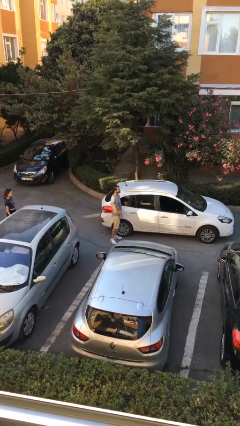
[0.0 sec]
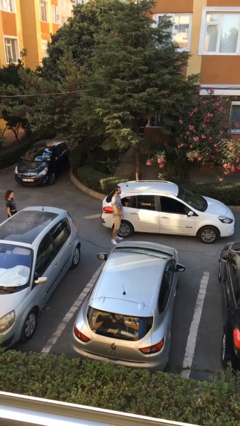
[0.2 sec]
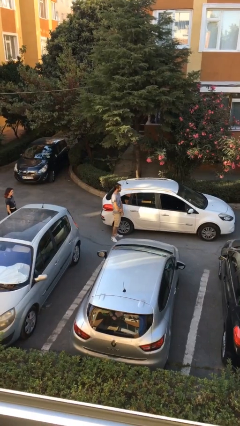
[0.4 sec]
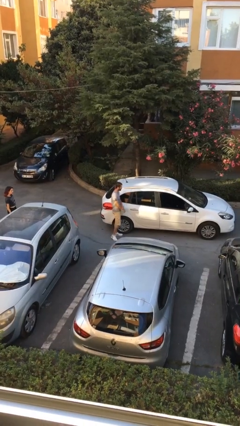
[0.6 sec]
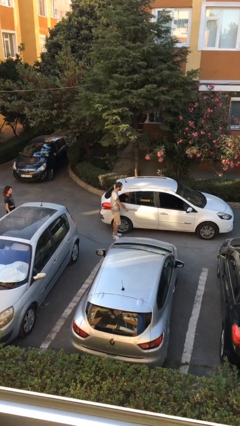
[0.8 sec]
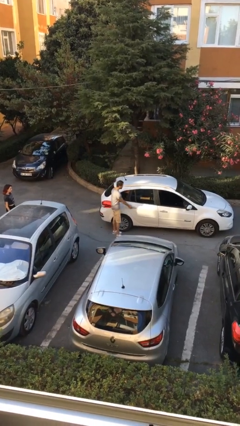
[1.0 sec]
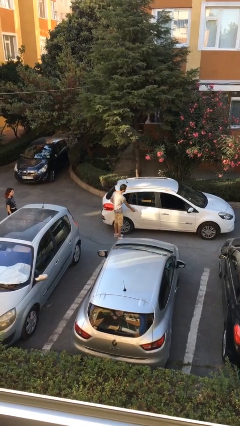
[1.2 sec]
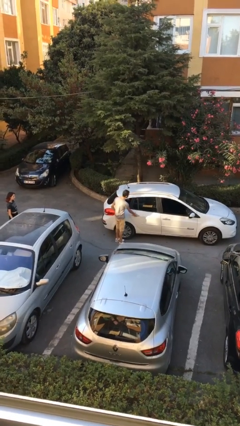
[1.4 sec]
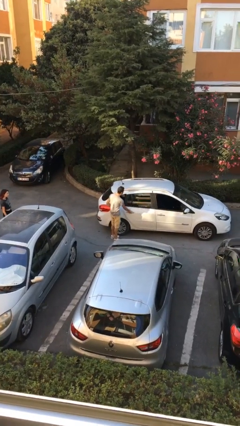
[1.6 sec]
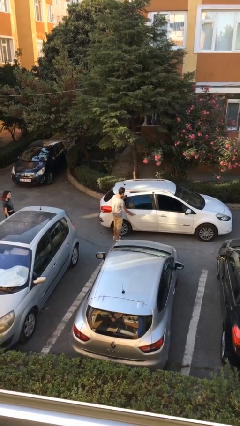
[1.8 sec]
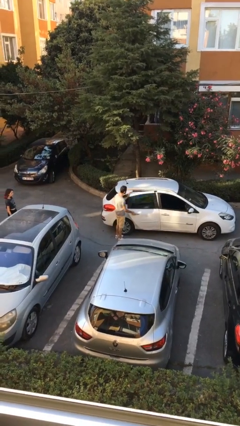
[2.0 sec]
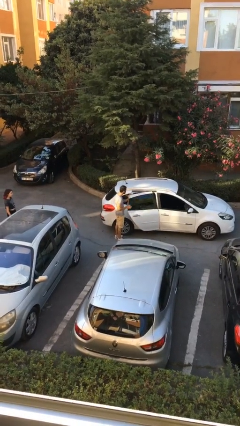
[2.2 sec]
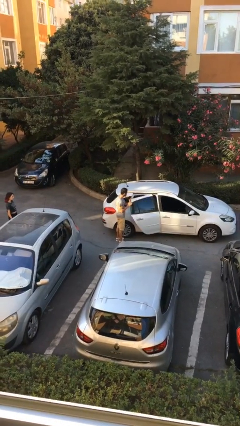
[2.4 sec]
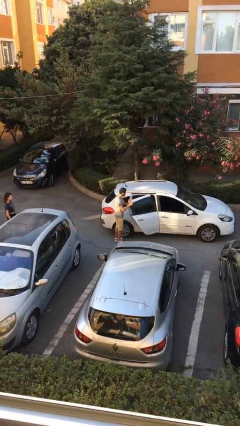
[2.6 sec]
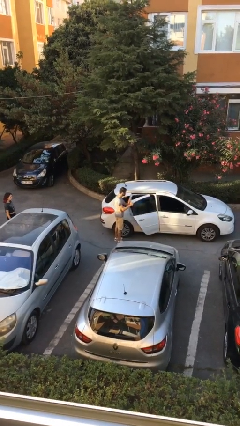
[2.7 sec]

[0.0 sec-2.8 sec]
person opens car door

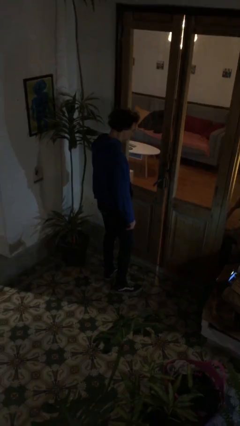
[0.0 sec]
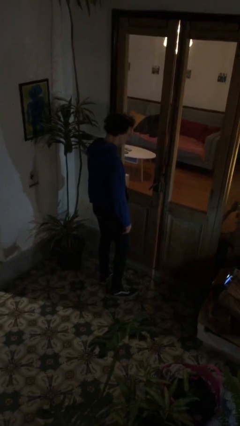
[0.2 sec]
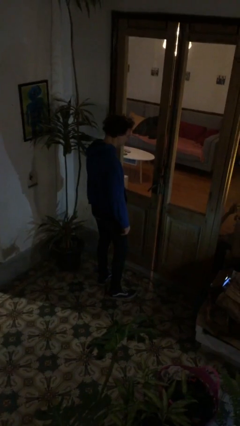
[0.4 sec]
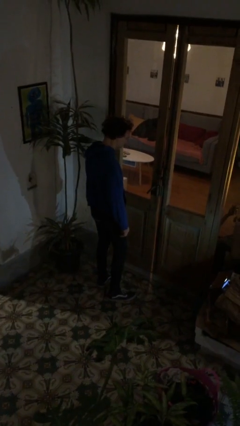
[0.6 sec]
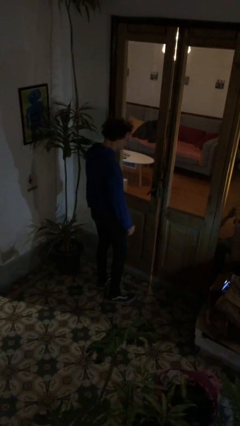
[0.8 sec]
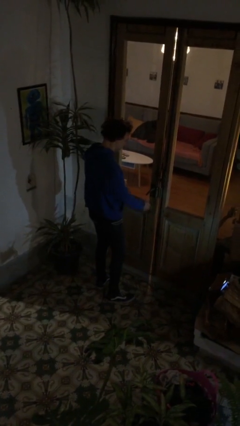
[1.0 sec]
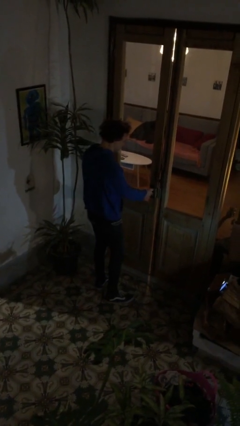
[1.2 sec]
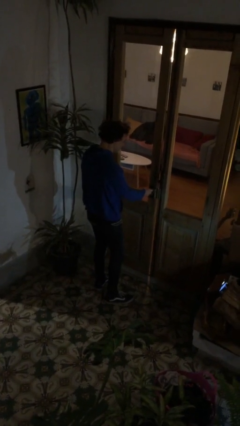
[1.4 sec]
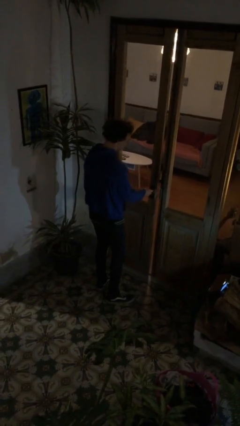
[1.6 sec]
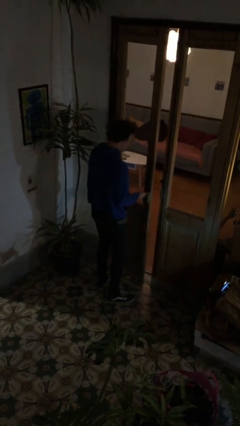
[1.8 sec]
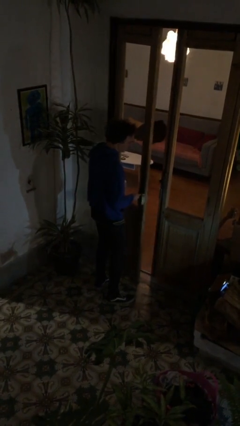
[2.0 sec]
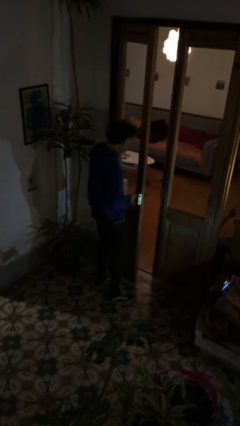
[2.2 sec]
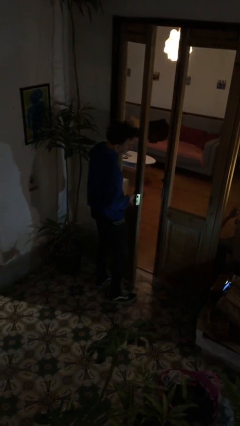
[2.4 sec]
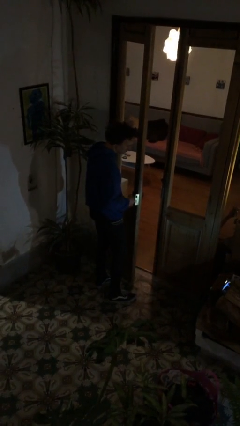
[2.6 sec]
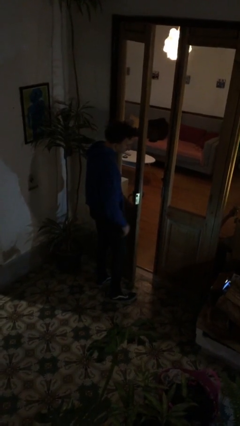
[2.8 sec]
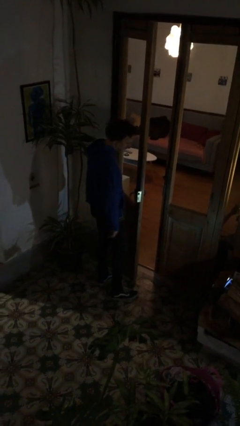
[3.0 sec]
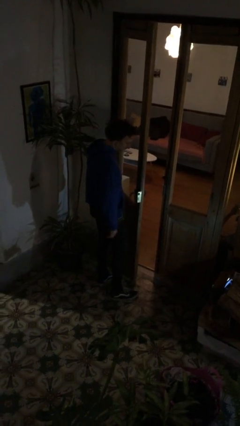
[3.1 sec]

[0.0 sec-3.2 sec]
person opens facility door

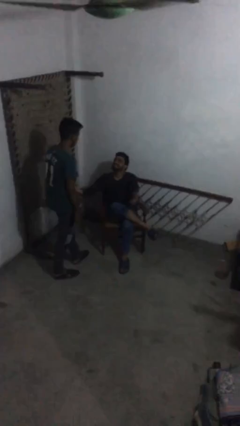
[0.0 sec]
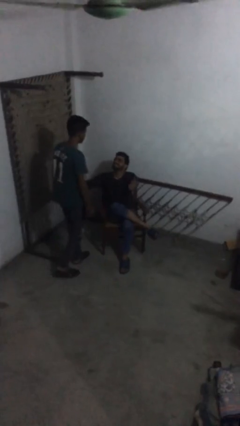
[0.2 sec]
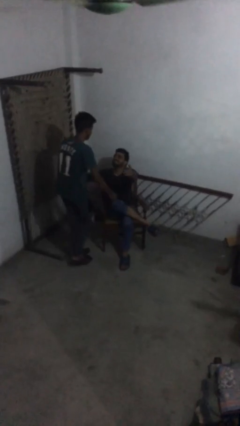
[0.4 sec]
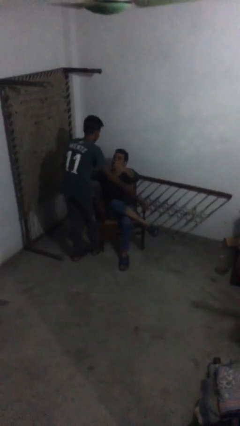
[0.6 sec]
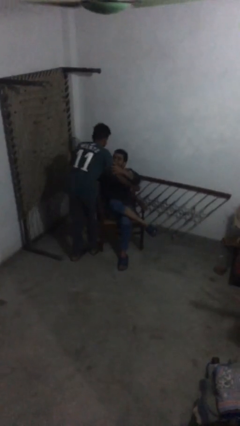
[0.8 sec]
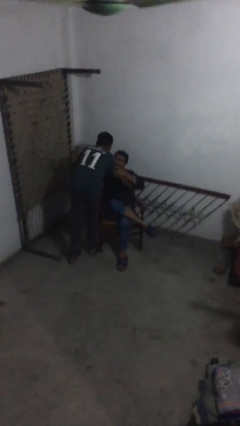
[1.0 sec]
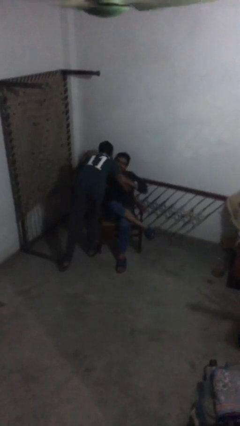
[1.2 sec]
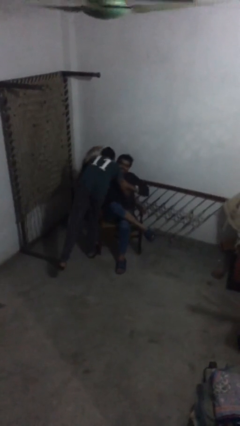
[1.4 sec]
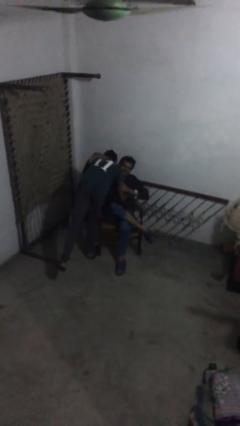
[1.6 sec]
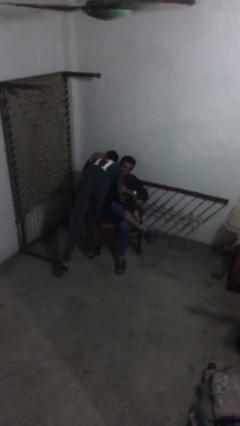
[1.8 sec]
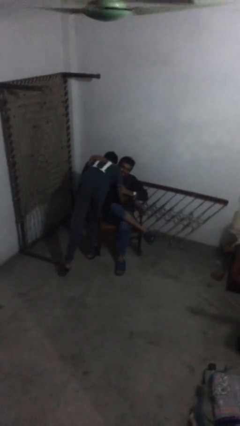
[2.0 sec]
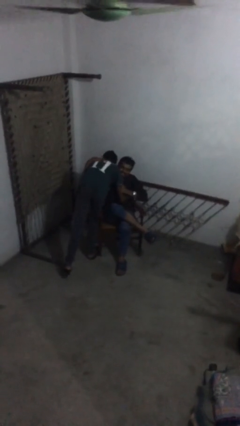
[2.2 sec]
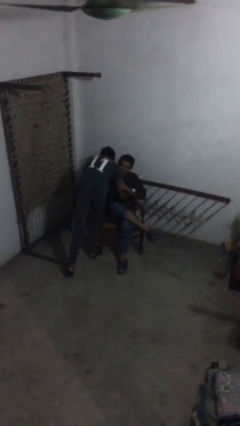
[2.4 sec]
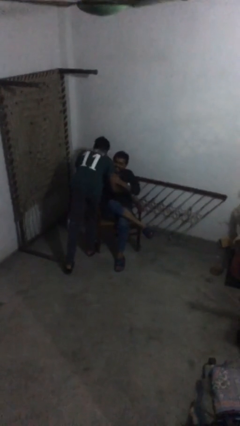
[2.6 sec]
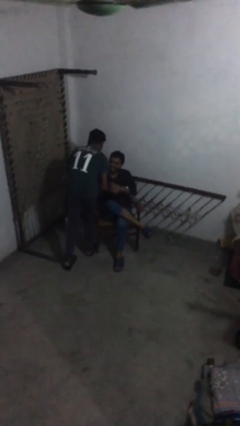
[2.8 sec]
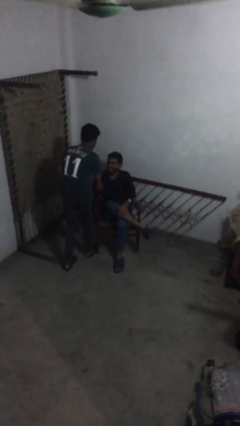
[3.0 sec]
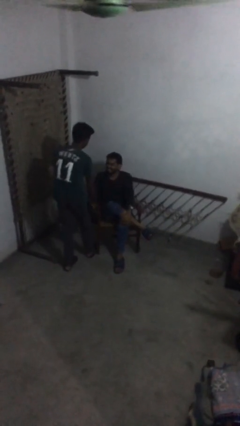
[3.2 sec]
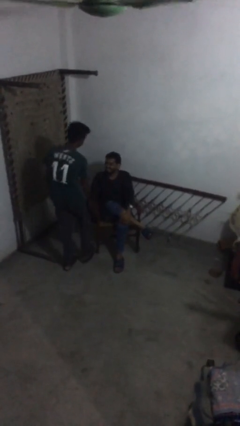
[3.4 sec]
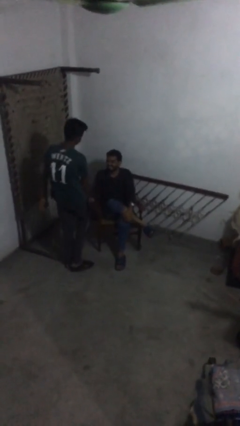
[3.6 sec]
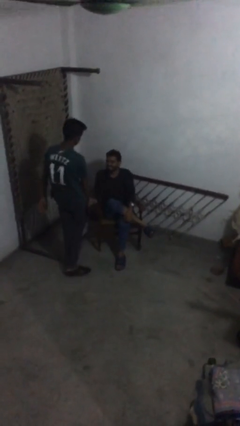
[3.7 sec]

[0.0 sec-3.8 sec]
person embraces person

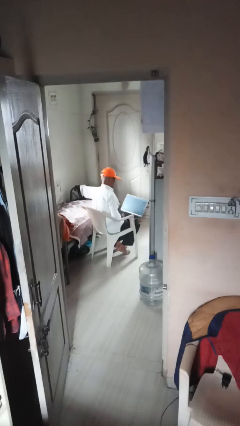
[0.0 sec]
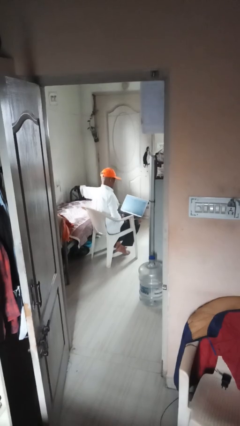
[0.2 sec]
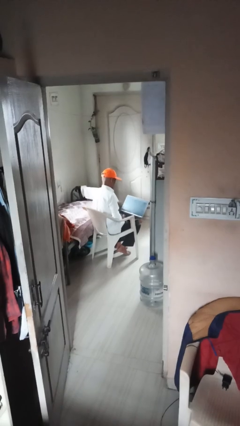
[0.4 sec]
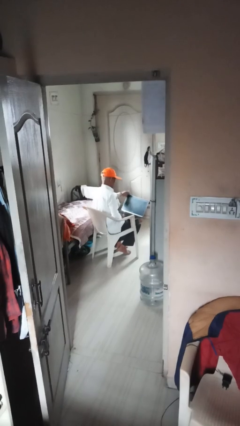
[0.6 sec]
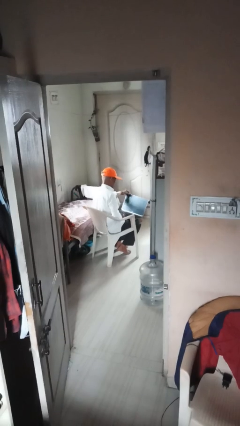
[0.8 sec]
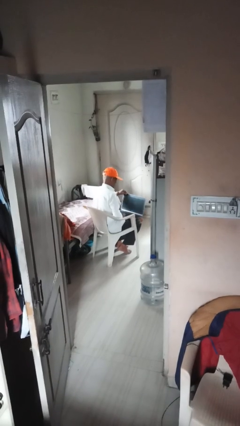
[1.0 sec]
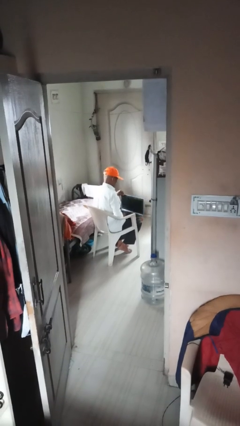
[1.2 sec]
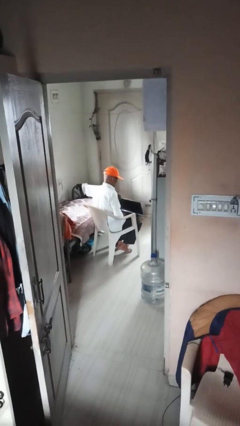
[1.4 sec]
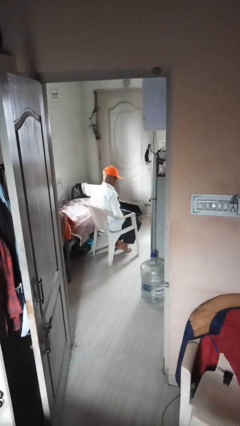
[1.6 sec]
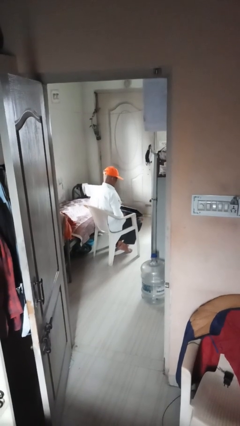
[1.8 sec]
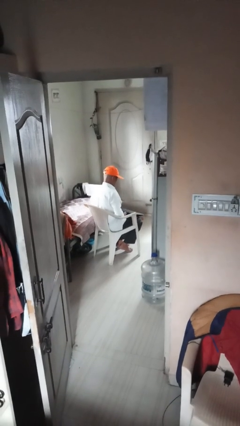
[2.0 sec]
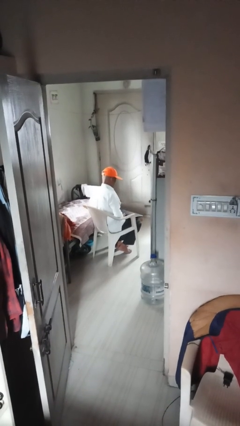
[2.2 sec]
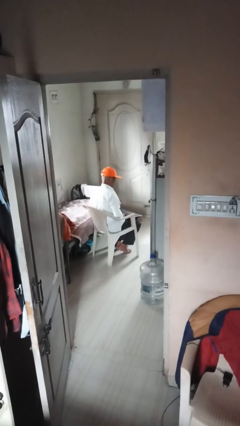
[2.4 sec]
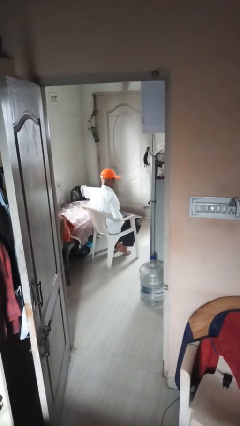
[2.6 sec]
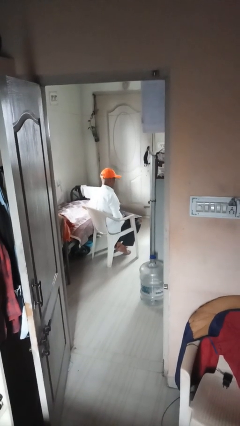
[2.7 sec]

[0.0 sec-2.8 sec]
person closes laptop

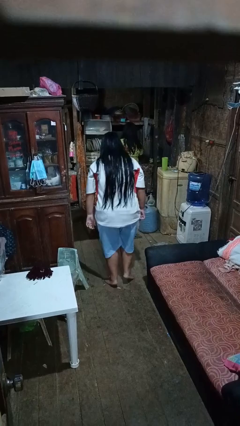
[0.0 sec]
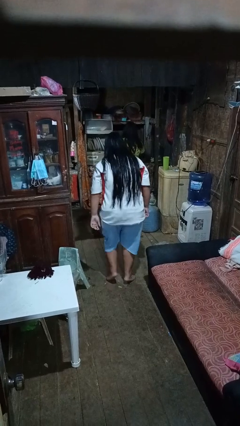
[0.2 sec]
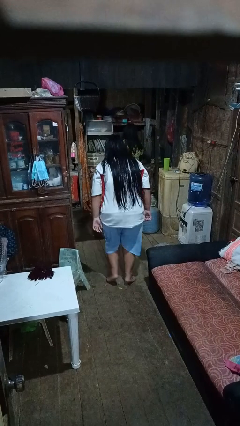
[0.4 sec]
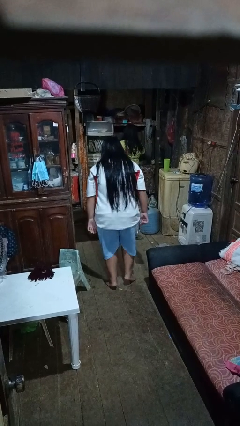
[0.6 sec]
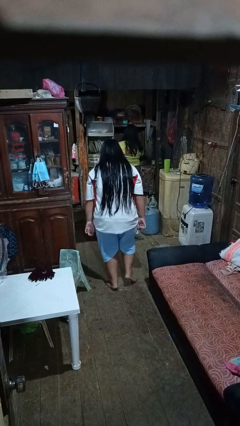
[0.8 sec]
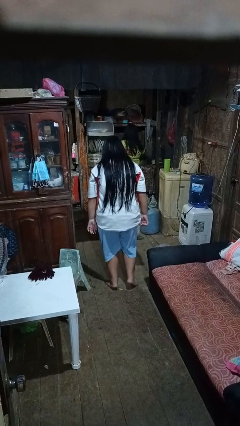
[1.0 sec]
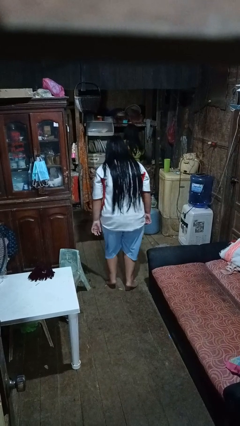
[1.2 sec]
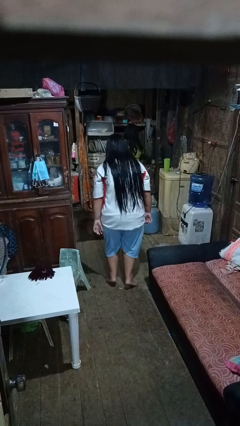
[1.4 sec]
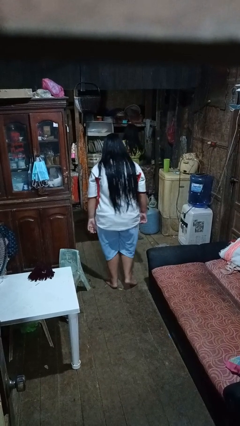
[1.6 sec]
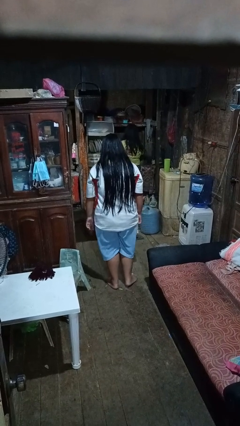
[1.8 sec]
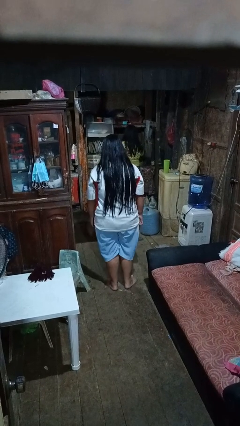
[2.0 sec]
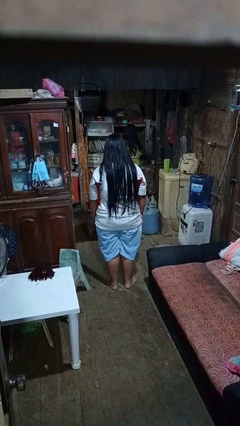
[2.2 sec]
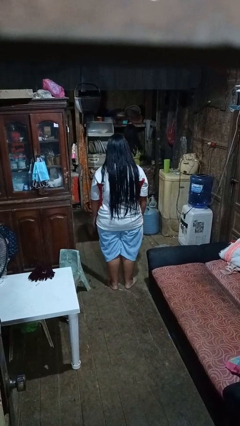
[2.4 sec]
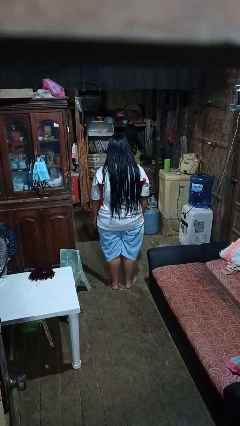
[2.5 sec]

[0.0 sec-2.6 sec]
person walks tiptoe

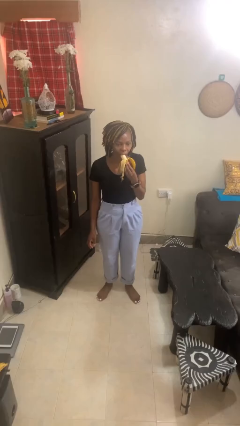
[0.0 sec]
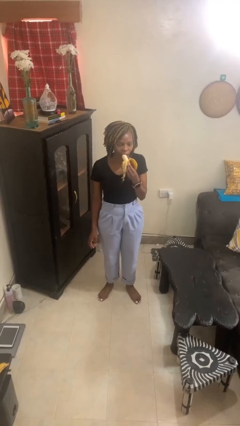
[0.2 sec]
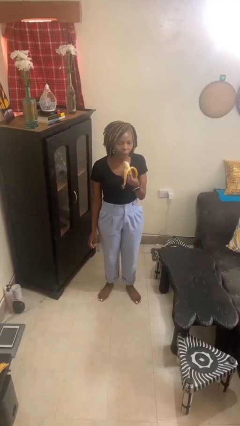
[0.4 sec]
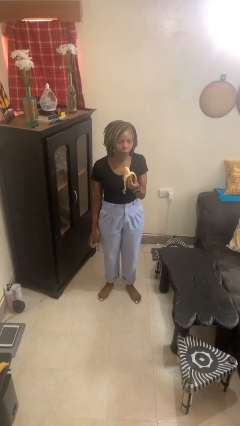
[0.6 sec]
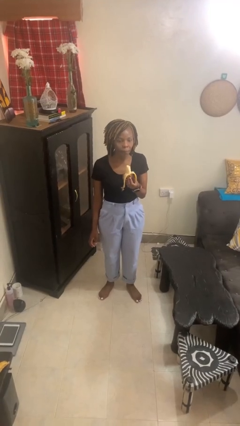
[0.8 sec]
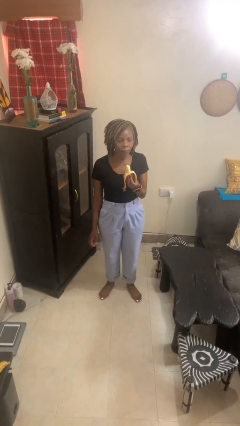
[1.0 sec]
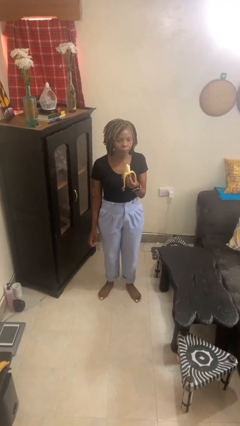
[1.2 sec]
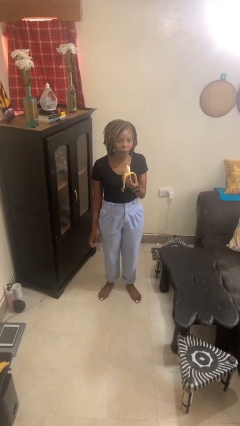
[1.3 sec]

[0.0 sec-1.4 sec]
person eats banana

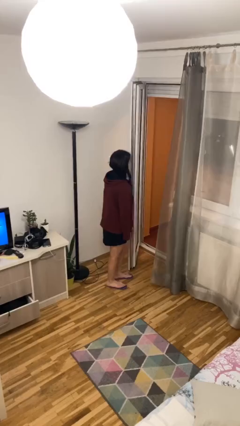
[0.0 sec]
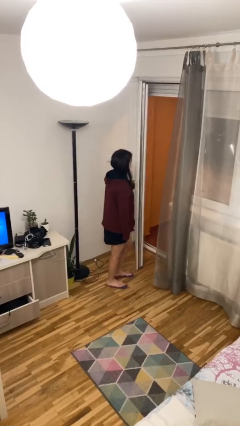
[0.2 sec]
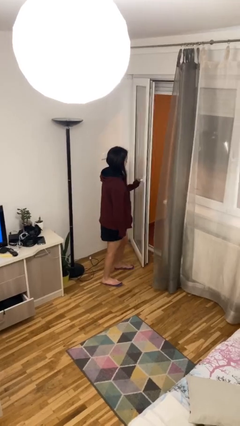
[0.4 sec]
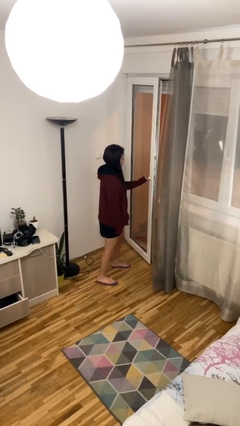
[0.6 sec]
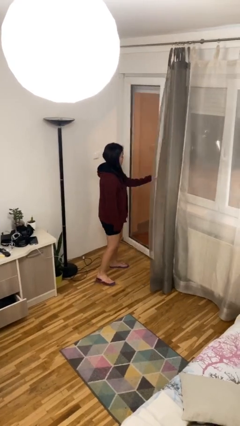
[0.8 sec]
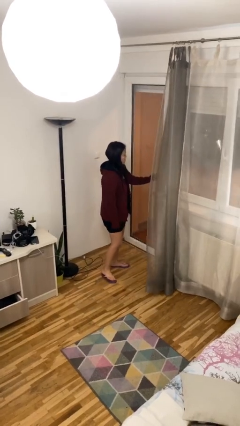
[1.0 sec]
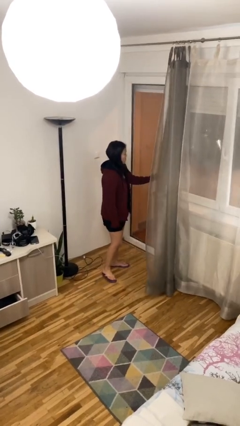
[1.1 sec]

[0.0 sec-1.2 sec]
person closes facility door
